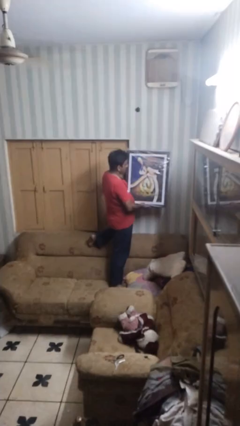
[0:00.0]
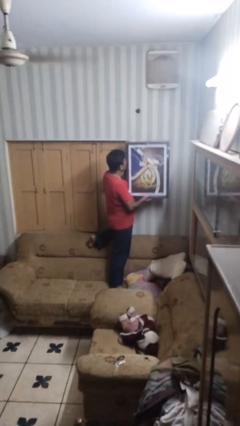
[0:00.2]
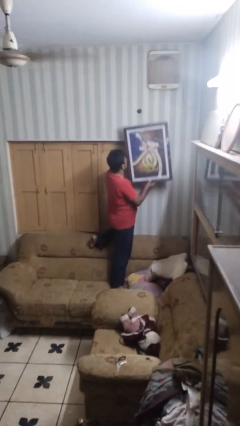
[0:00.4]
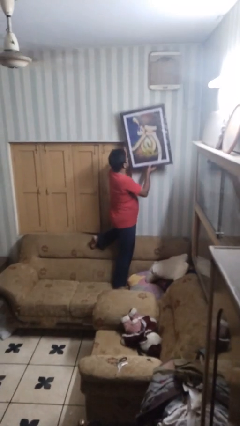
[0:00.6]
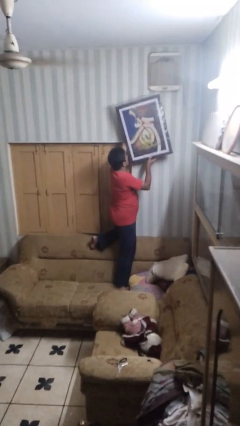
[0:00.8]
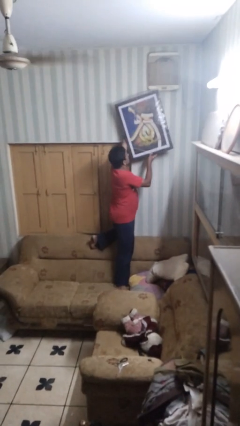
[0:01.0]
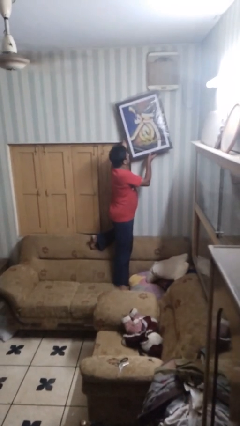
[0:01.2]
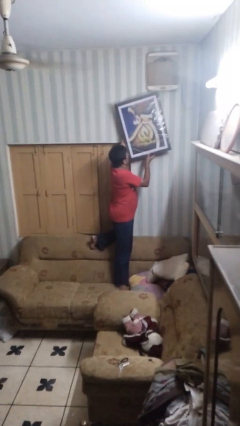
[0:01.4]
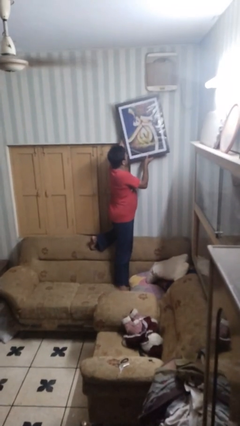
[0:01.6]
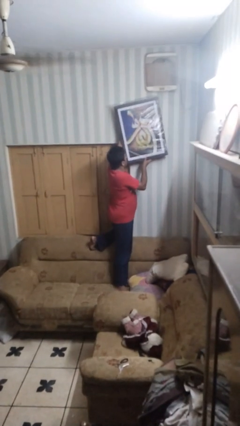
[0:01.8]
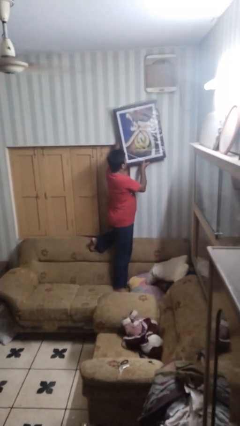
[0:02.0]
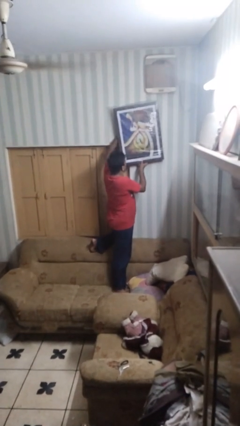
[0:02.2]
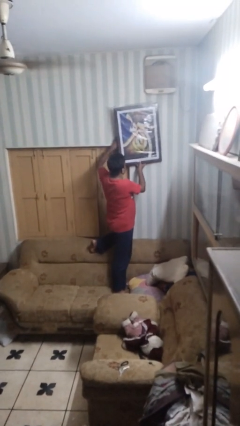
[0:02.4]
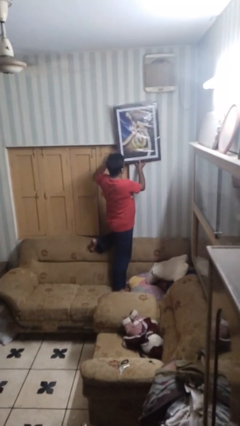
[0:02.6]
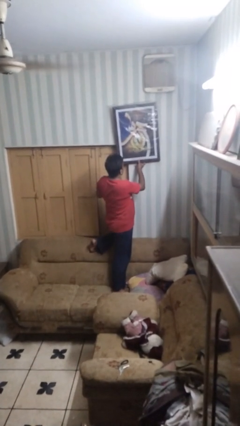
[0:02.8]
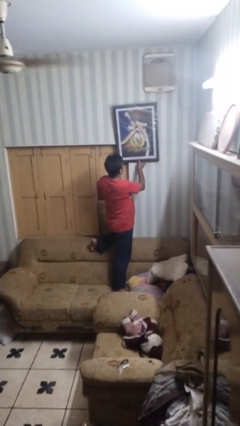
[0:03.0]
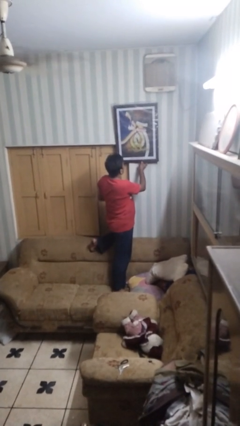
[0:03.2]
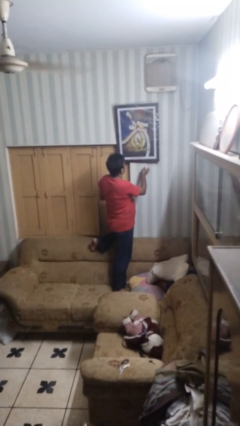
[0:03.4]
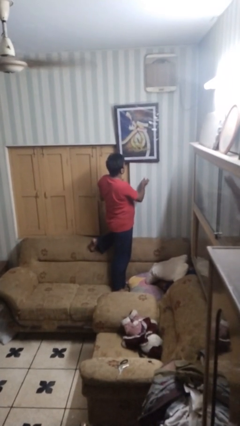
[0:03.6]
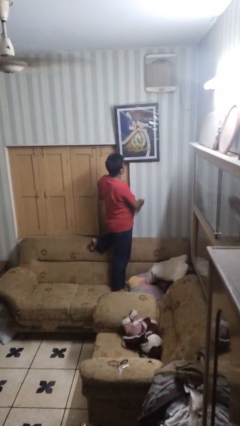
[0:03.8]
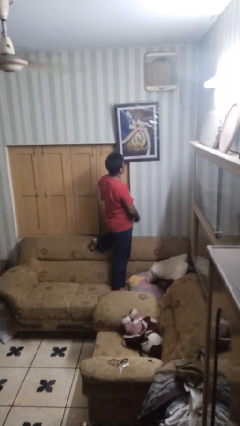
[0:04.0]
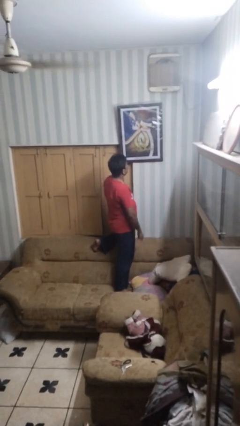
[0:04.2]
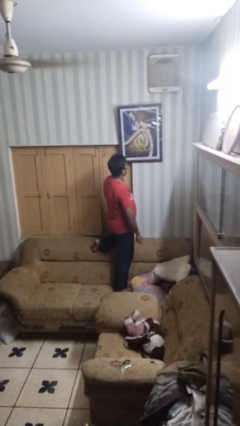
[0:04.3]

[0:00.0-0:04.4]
person puts up picture frame

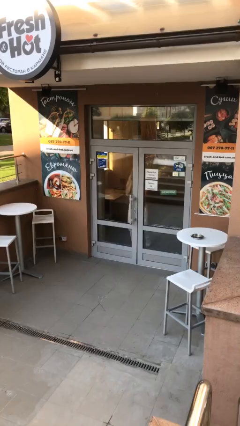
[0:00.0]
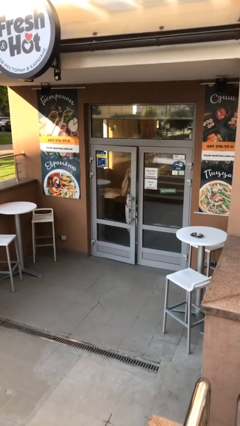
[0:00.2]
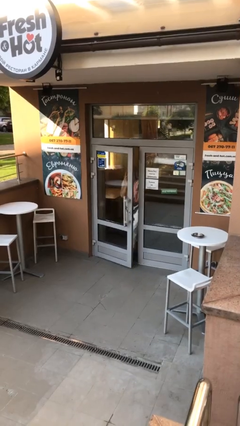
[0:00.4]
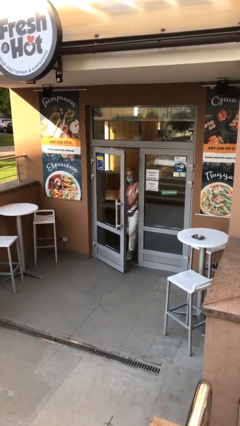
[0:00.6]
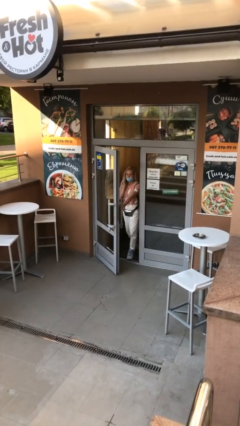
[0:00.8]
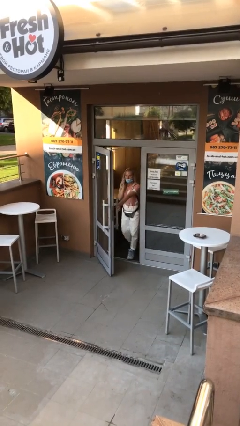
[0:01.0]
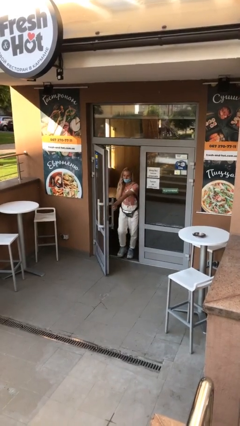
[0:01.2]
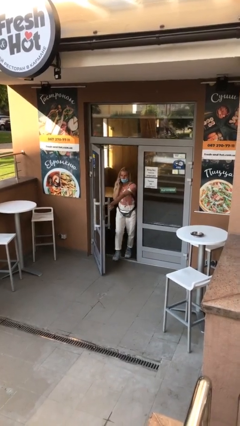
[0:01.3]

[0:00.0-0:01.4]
person opens facility door

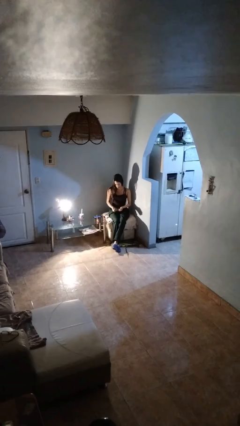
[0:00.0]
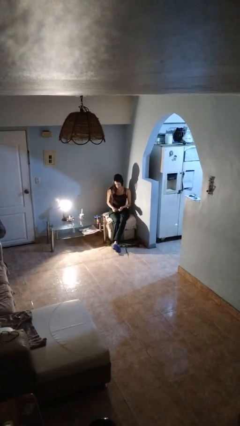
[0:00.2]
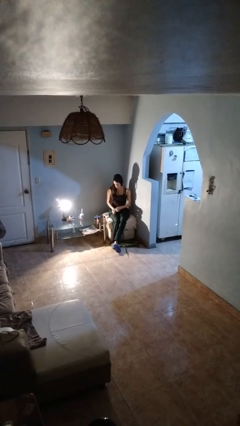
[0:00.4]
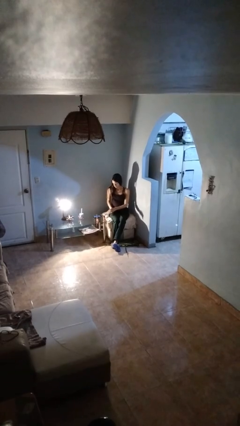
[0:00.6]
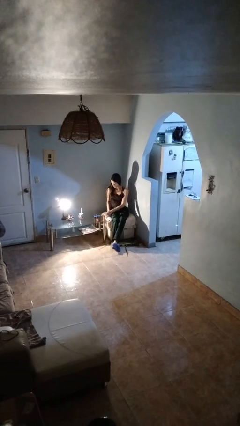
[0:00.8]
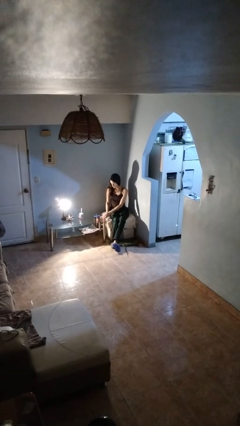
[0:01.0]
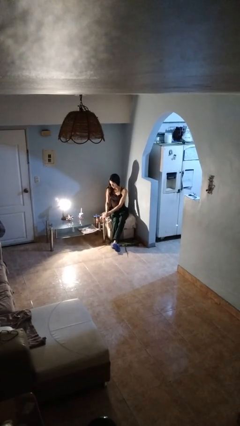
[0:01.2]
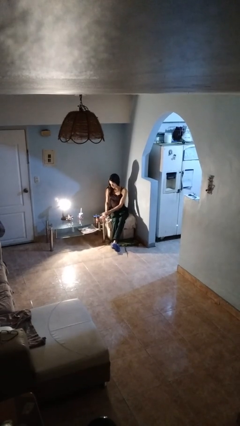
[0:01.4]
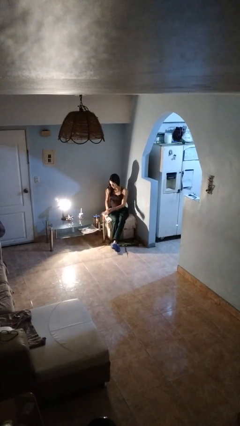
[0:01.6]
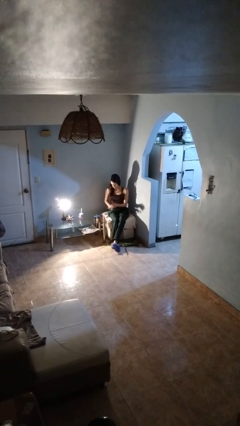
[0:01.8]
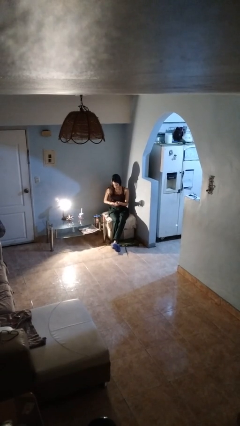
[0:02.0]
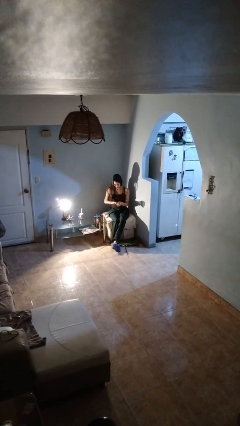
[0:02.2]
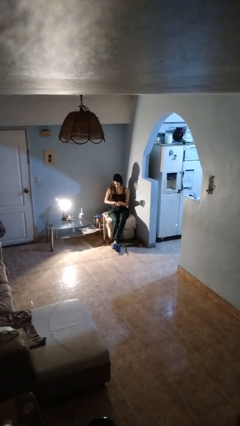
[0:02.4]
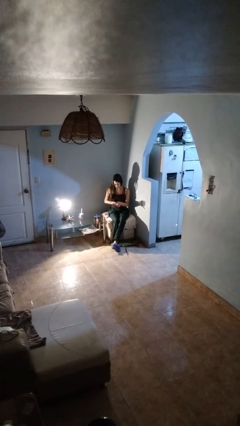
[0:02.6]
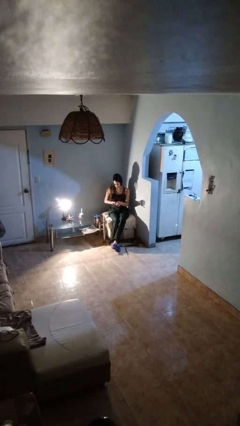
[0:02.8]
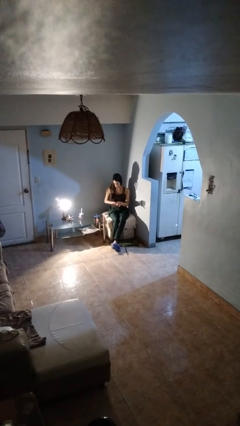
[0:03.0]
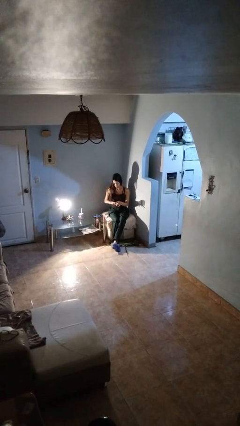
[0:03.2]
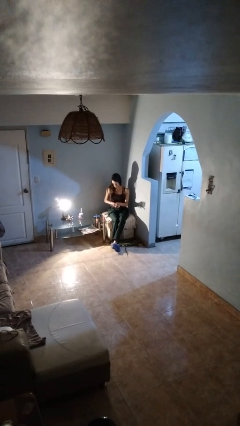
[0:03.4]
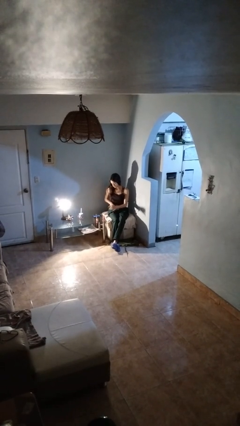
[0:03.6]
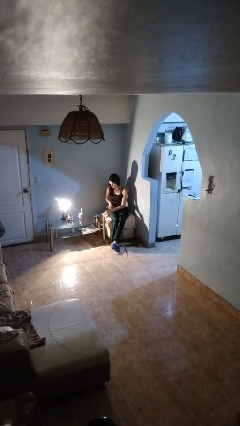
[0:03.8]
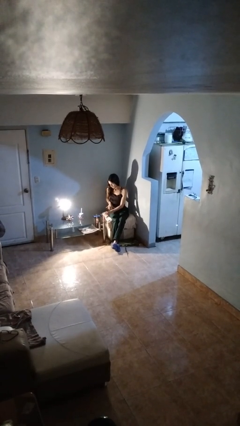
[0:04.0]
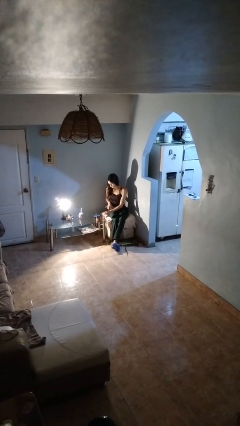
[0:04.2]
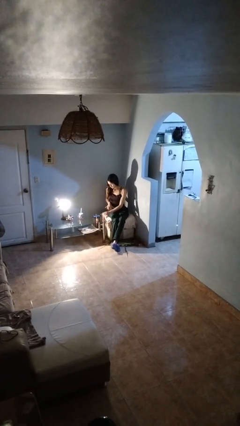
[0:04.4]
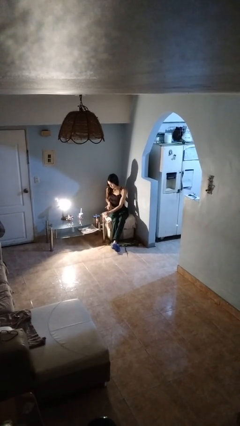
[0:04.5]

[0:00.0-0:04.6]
person paints fingernails

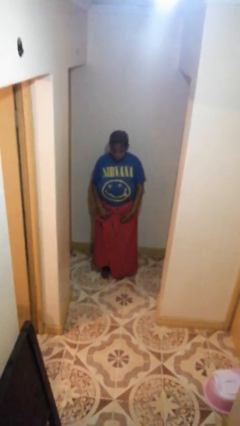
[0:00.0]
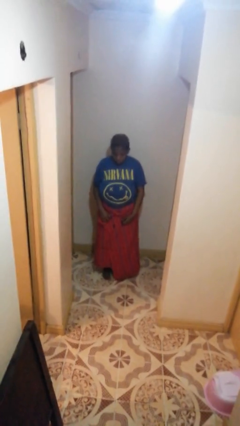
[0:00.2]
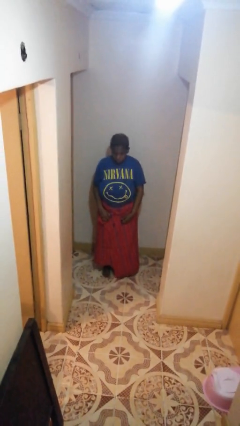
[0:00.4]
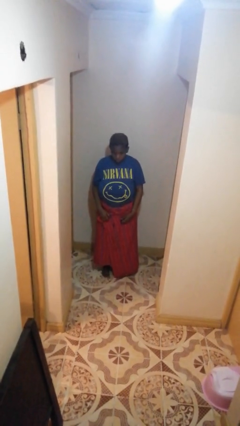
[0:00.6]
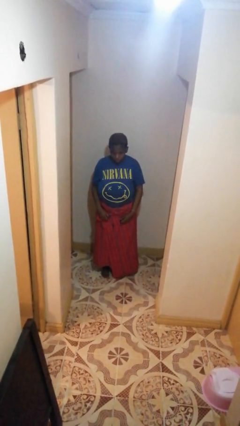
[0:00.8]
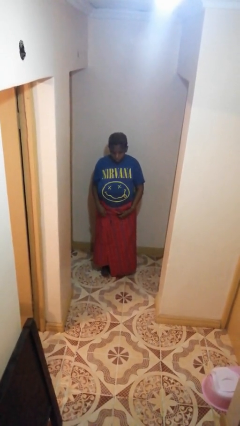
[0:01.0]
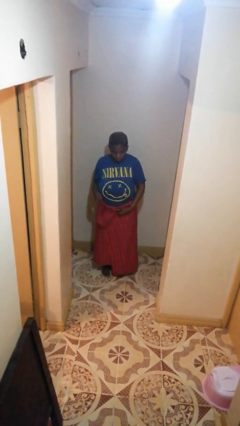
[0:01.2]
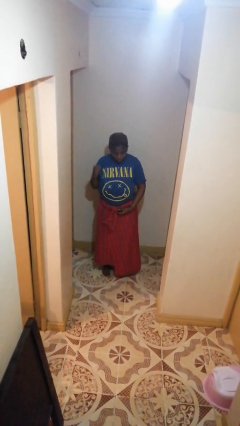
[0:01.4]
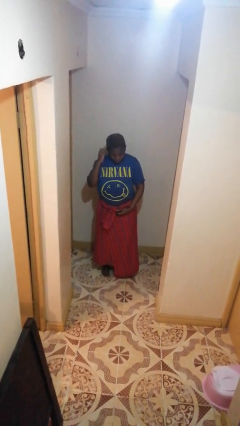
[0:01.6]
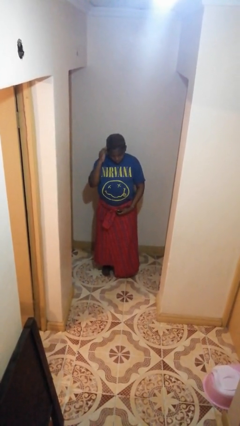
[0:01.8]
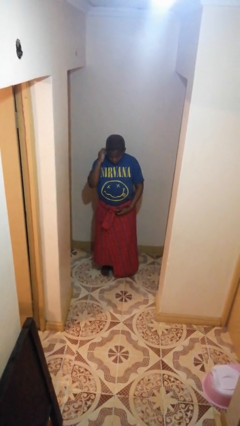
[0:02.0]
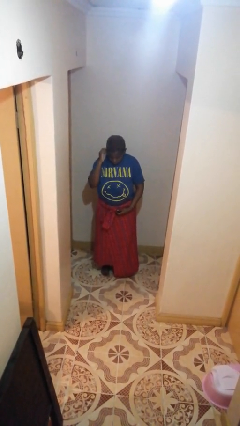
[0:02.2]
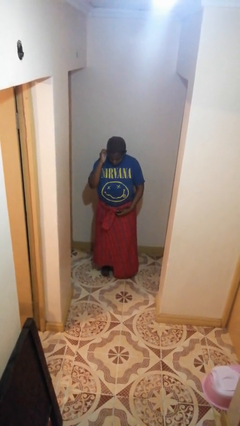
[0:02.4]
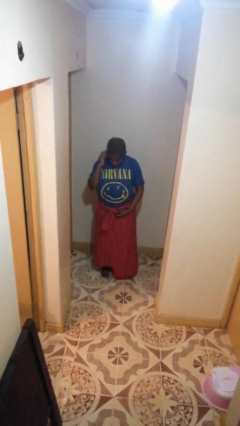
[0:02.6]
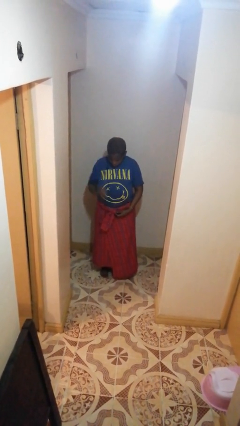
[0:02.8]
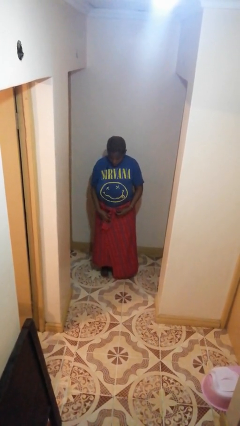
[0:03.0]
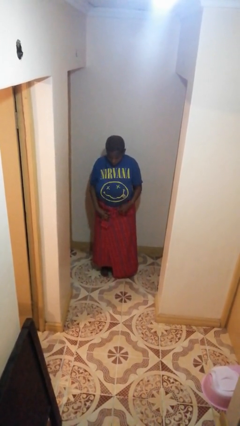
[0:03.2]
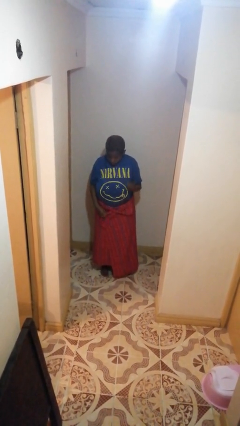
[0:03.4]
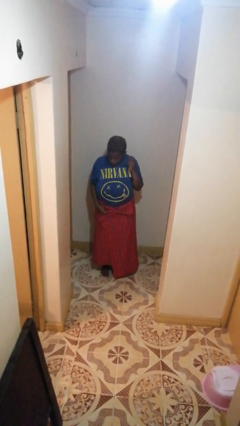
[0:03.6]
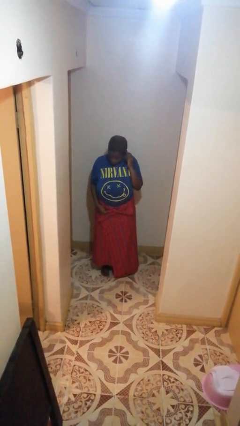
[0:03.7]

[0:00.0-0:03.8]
person puts on headphones

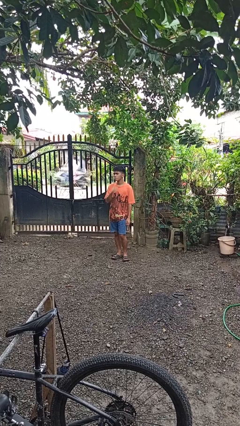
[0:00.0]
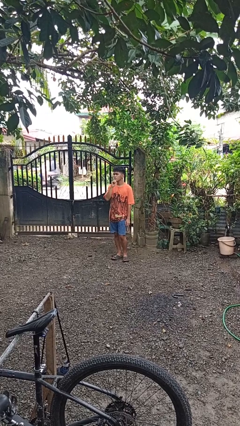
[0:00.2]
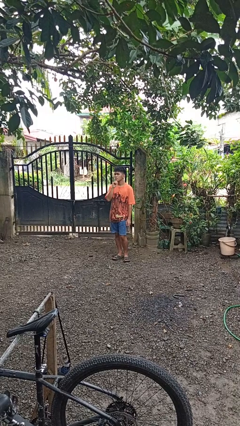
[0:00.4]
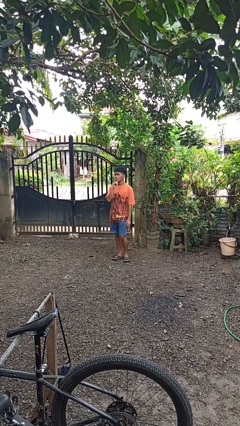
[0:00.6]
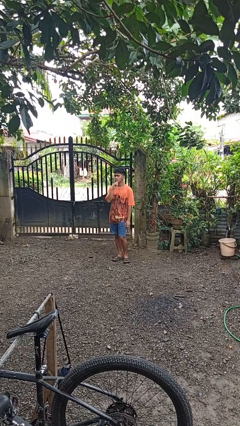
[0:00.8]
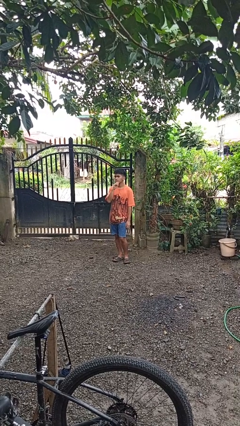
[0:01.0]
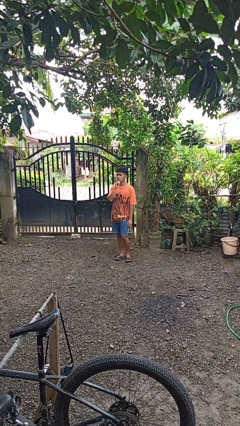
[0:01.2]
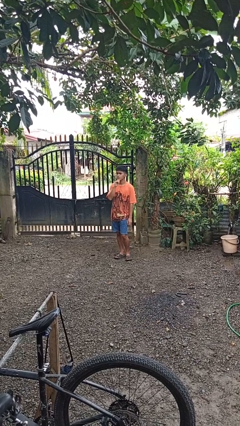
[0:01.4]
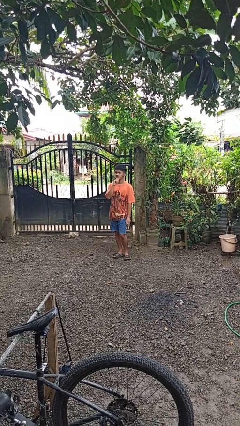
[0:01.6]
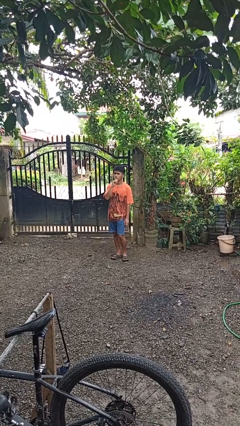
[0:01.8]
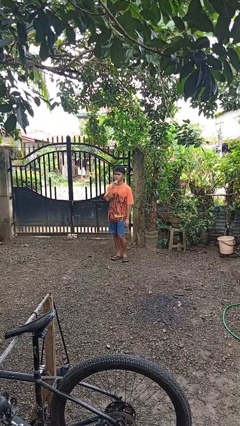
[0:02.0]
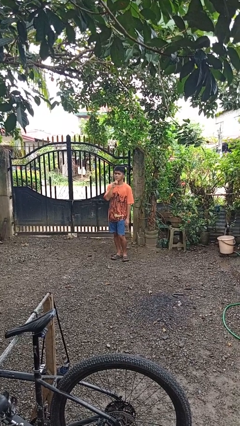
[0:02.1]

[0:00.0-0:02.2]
person strokes chin

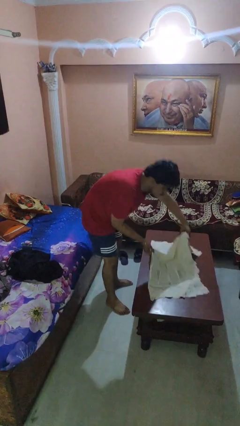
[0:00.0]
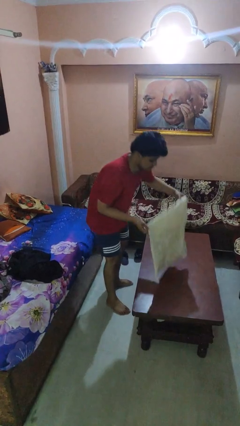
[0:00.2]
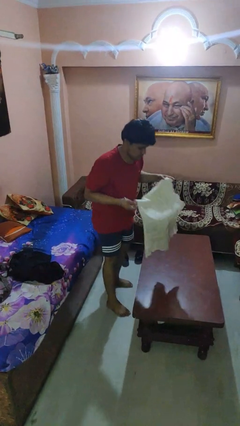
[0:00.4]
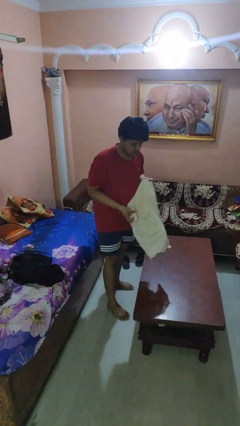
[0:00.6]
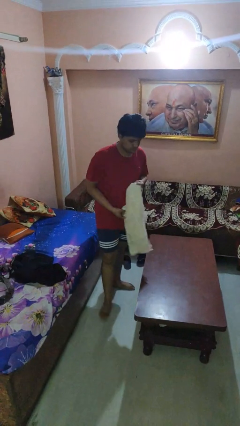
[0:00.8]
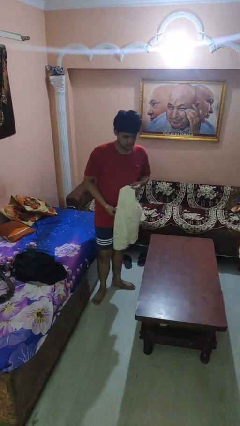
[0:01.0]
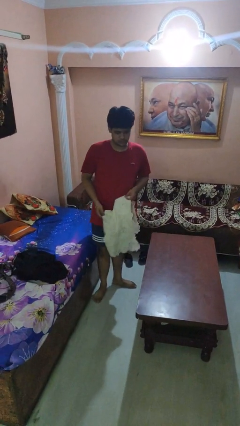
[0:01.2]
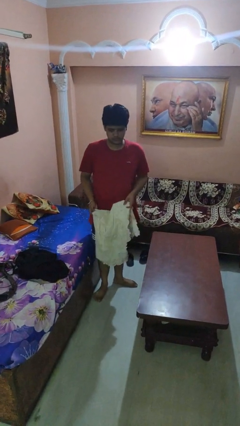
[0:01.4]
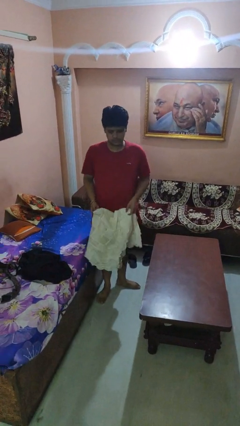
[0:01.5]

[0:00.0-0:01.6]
person folds tablecloth
